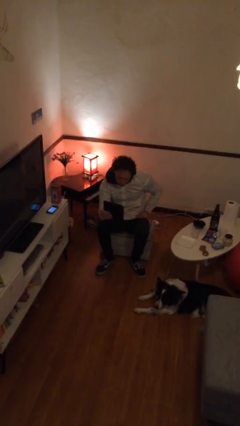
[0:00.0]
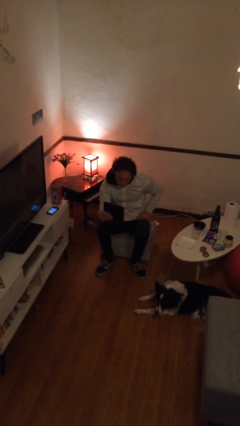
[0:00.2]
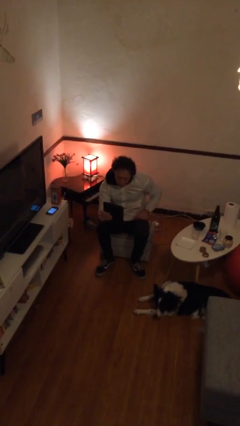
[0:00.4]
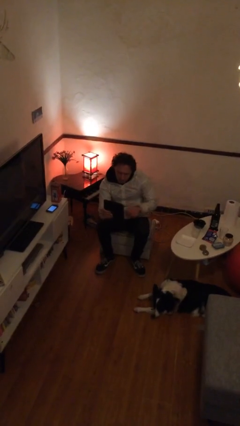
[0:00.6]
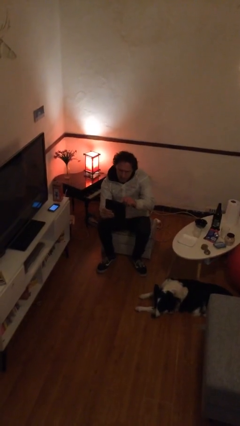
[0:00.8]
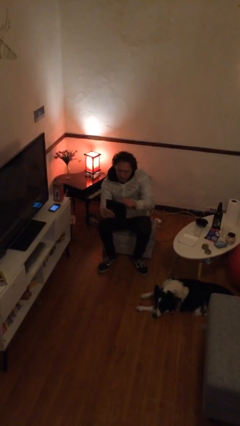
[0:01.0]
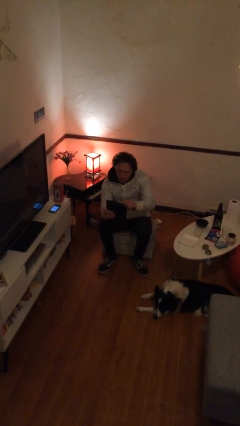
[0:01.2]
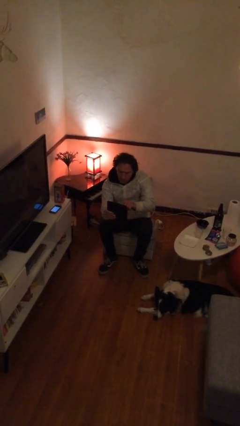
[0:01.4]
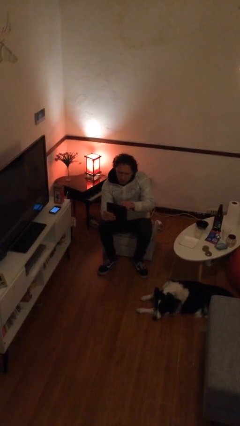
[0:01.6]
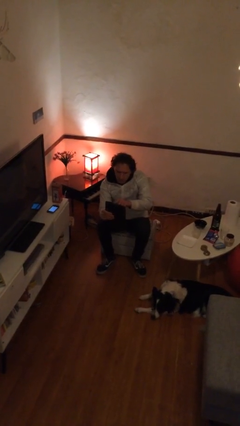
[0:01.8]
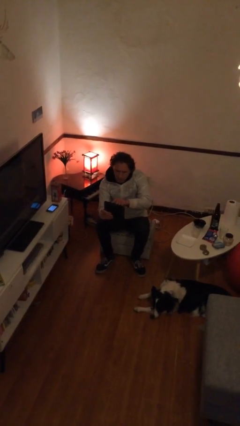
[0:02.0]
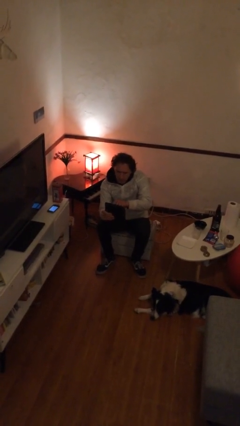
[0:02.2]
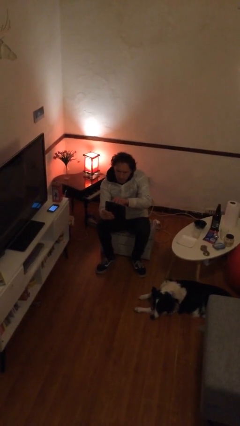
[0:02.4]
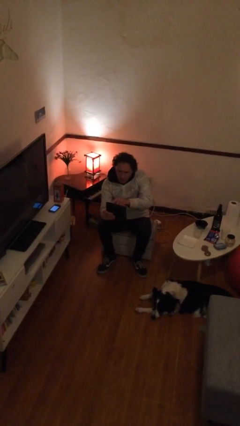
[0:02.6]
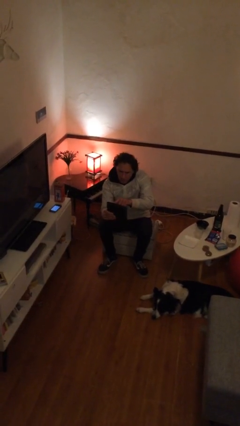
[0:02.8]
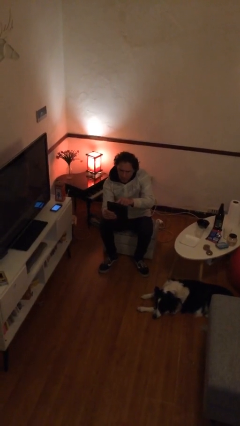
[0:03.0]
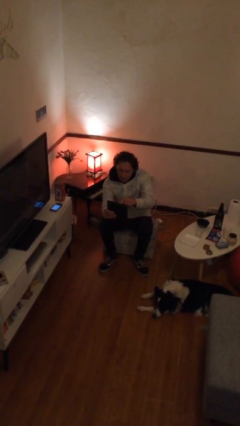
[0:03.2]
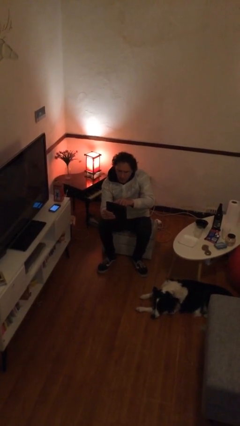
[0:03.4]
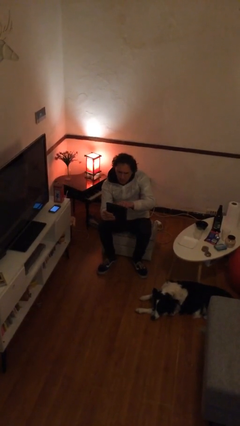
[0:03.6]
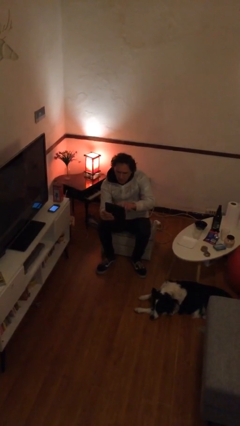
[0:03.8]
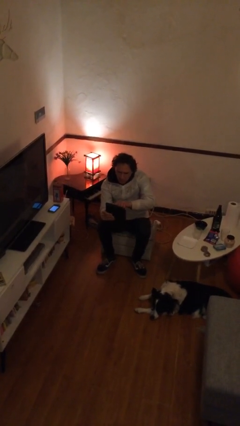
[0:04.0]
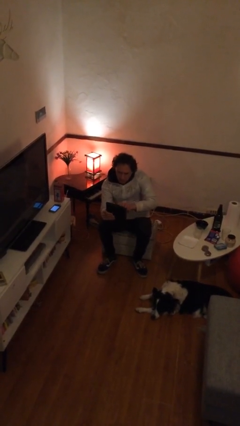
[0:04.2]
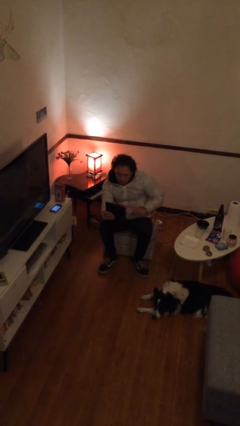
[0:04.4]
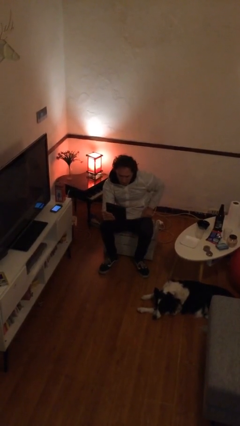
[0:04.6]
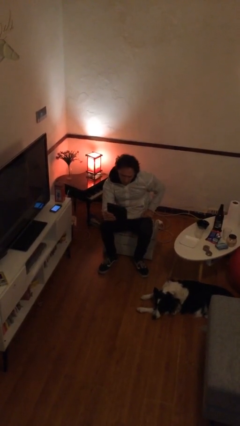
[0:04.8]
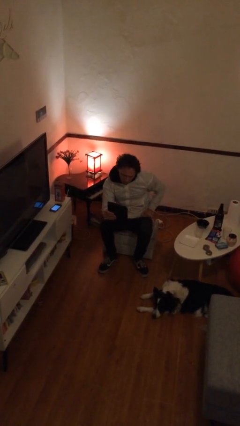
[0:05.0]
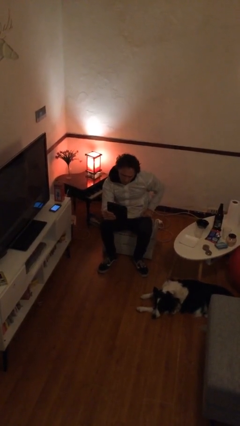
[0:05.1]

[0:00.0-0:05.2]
person interacts with tablet

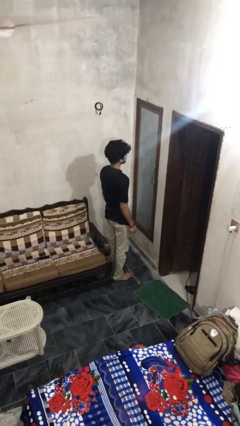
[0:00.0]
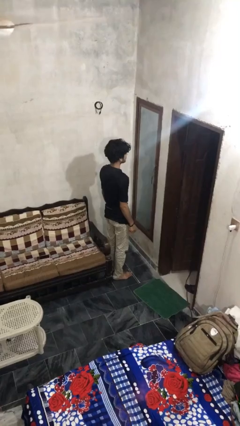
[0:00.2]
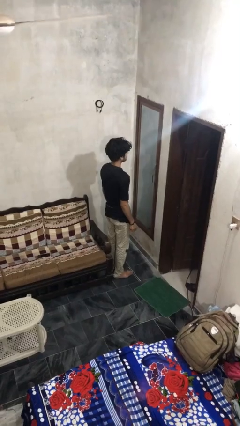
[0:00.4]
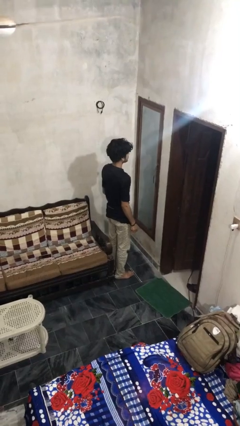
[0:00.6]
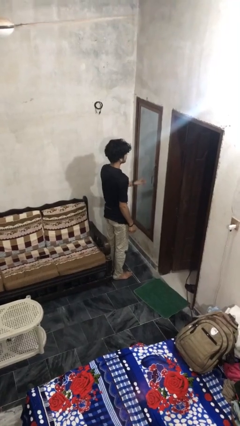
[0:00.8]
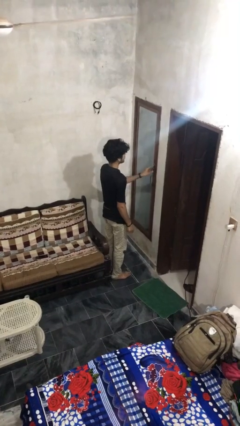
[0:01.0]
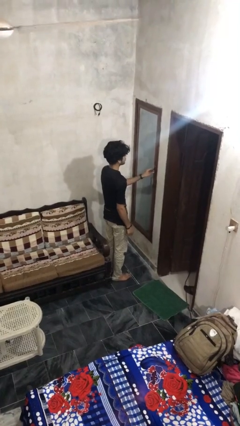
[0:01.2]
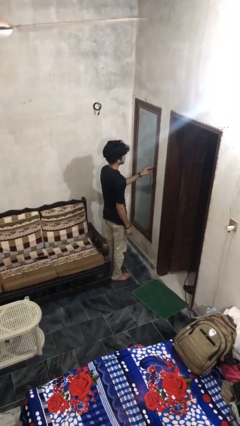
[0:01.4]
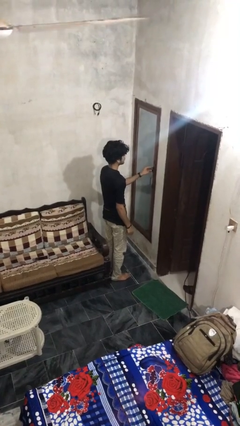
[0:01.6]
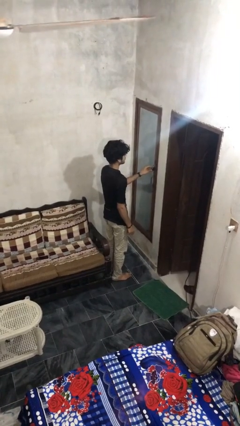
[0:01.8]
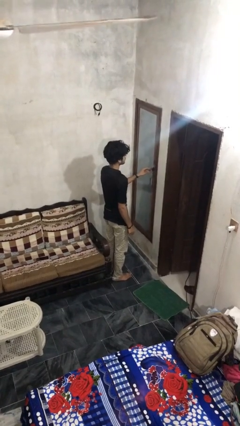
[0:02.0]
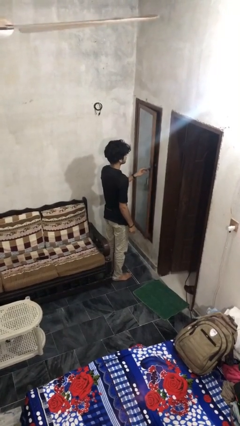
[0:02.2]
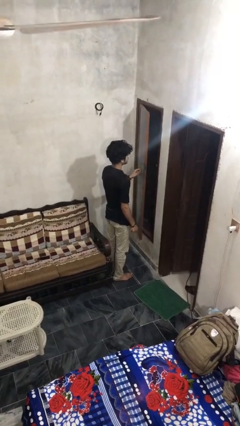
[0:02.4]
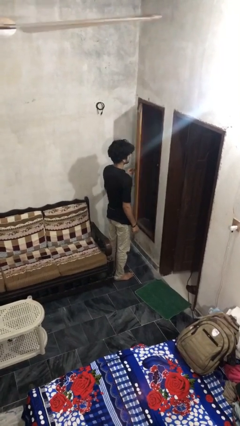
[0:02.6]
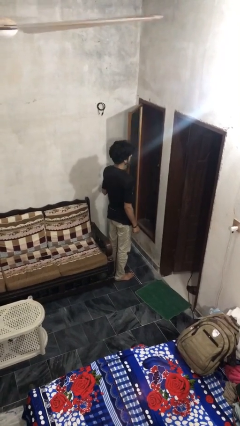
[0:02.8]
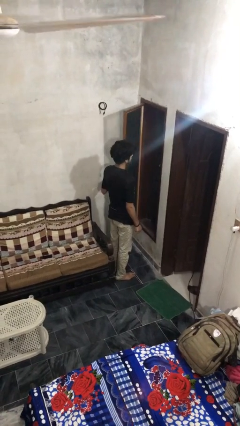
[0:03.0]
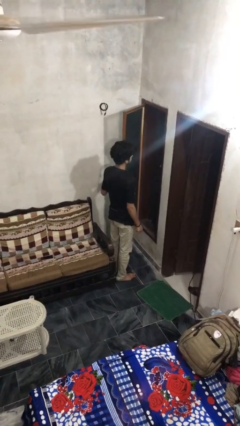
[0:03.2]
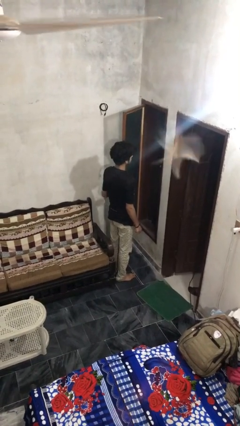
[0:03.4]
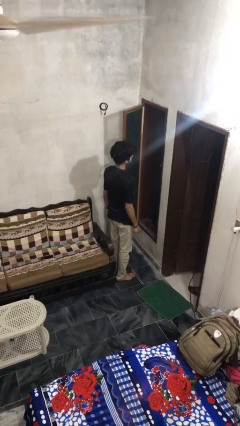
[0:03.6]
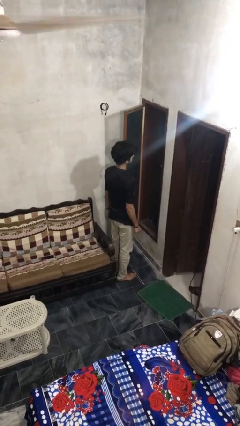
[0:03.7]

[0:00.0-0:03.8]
person opens home window

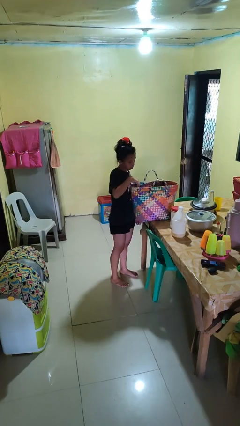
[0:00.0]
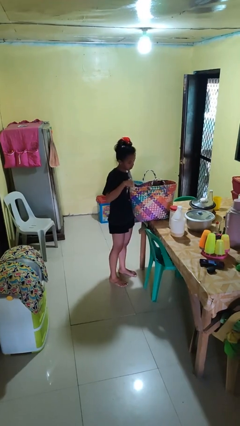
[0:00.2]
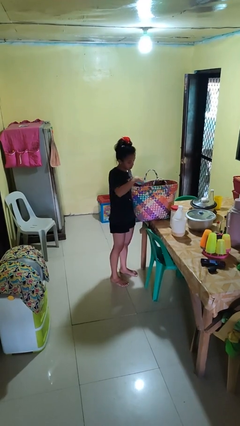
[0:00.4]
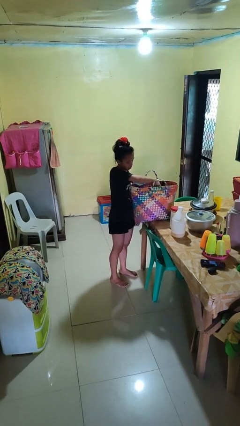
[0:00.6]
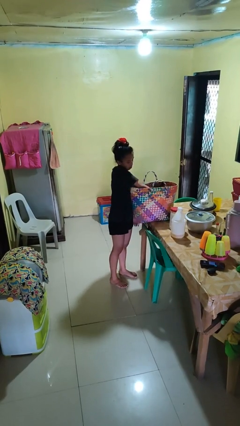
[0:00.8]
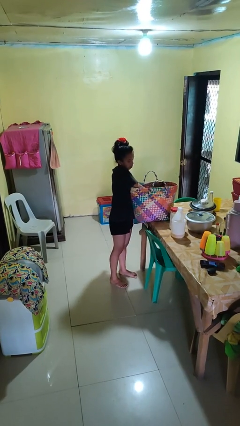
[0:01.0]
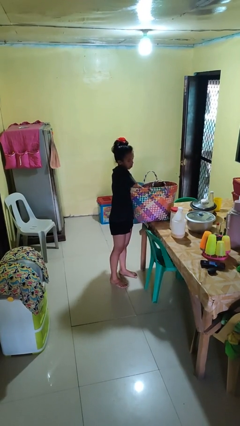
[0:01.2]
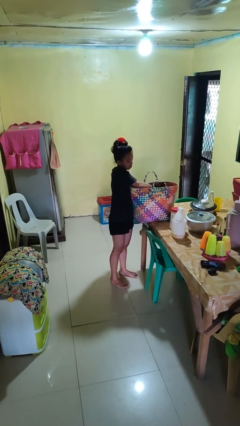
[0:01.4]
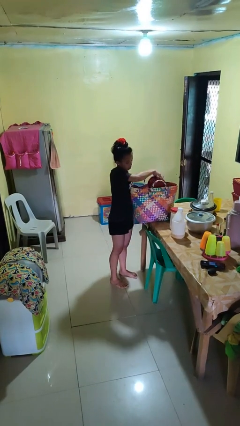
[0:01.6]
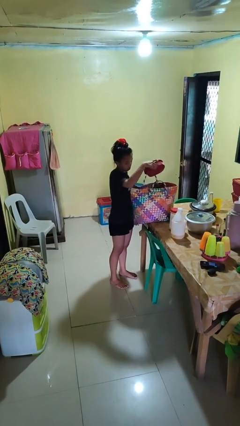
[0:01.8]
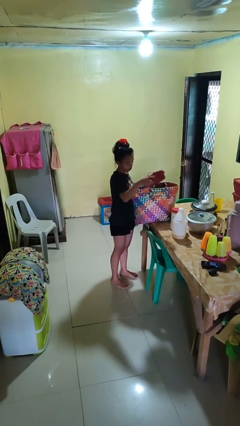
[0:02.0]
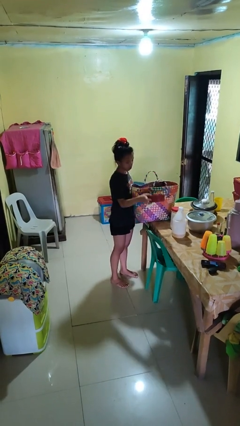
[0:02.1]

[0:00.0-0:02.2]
person takes object from basket

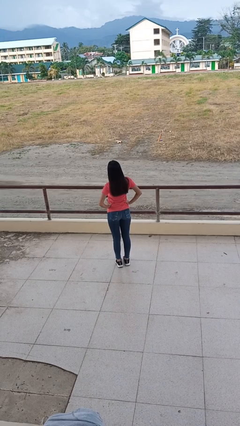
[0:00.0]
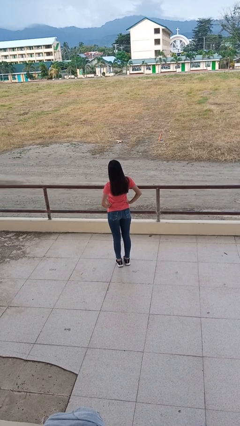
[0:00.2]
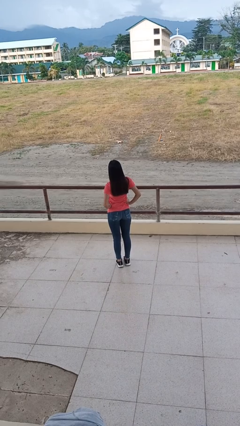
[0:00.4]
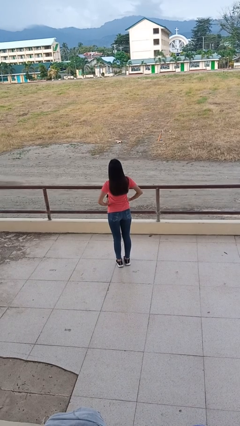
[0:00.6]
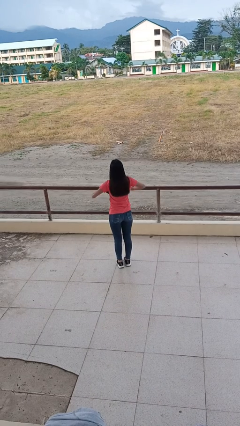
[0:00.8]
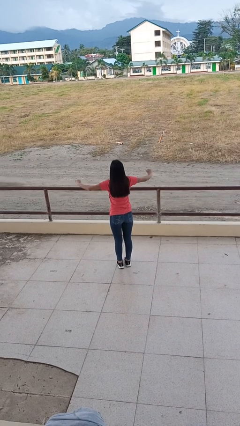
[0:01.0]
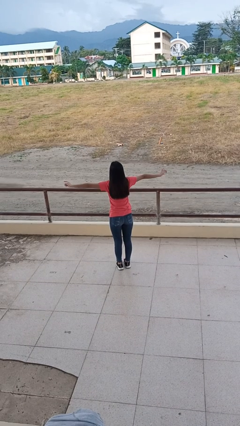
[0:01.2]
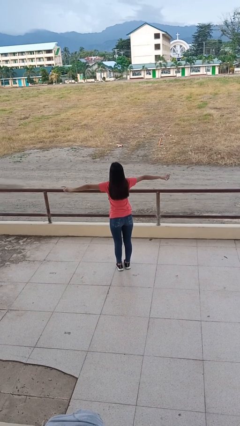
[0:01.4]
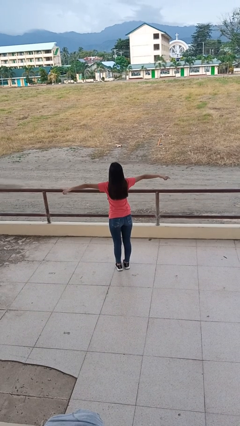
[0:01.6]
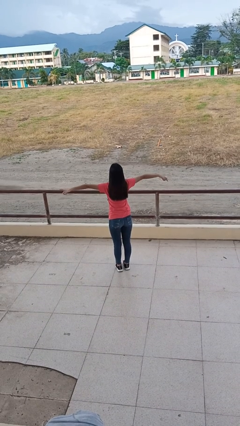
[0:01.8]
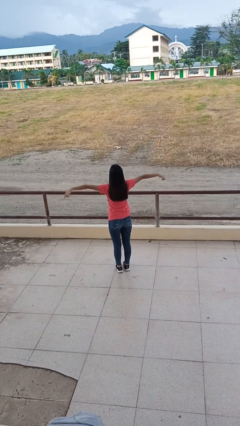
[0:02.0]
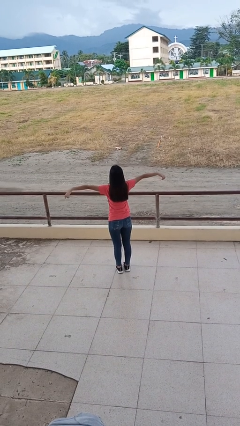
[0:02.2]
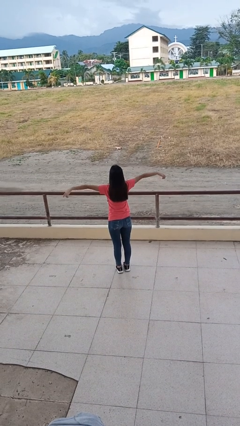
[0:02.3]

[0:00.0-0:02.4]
person stretches arms to side

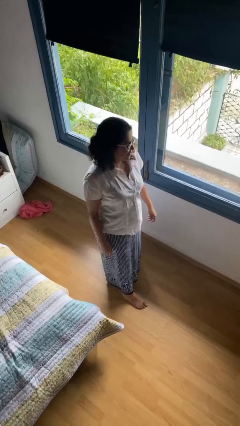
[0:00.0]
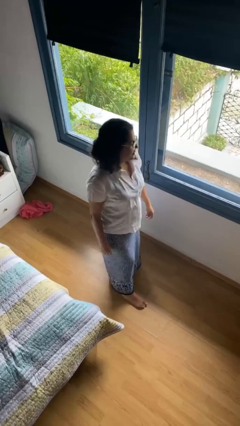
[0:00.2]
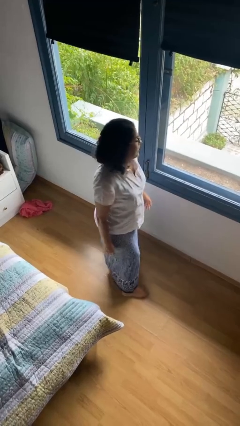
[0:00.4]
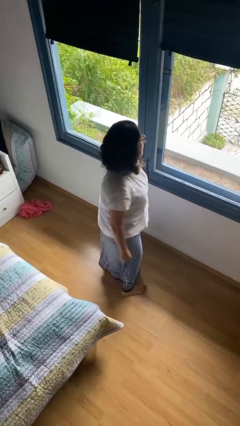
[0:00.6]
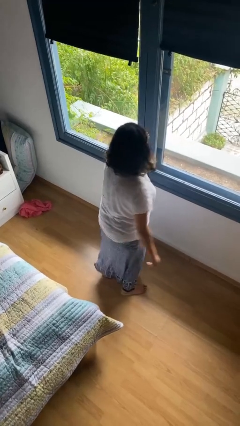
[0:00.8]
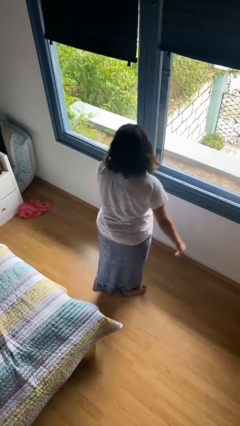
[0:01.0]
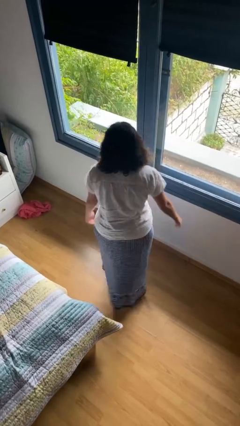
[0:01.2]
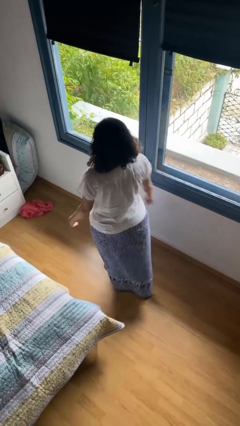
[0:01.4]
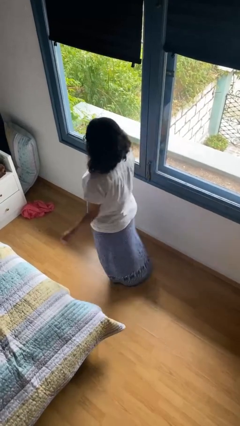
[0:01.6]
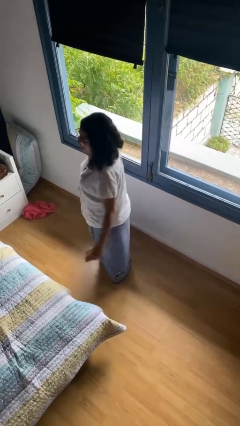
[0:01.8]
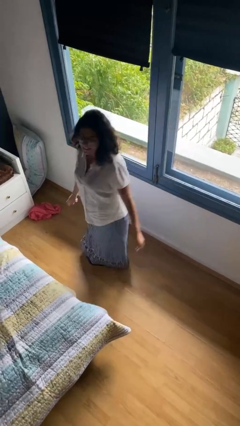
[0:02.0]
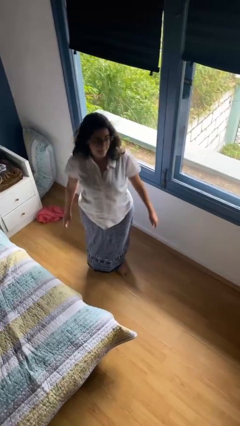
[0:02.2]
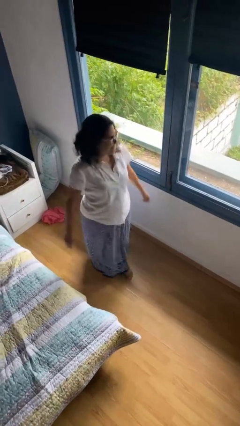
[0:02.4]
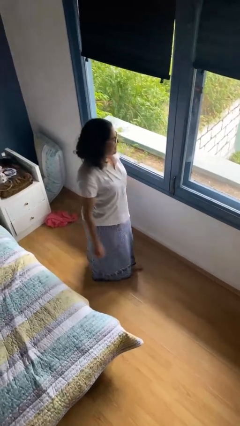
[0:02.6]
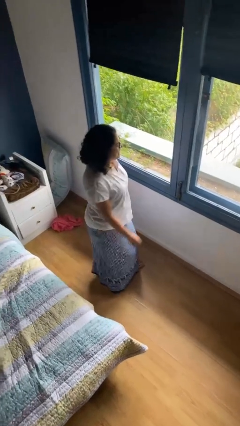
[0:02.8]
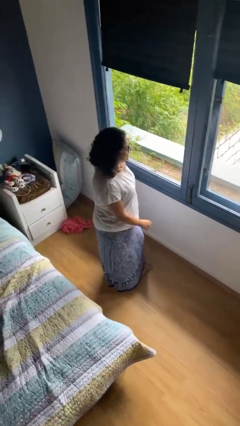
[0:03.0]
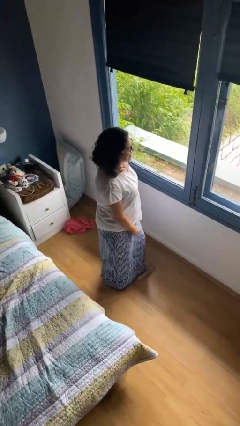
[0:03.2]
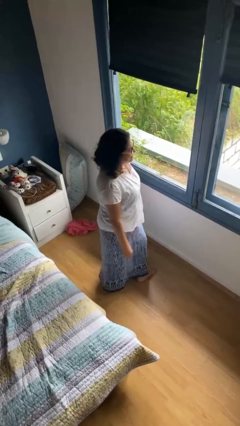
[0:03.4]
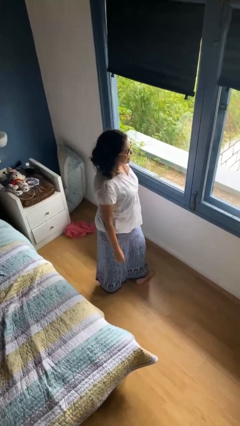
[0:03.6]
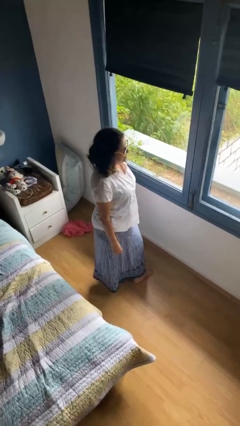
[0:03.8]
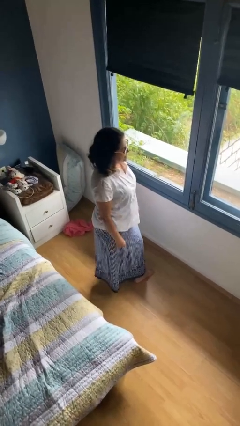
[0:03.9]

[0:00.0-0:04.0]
person twirls

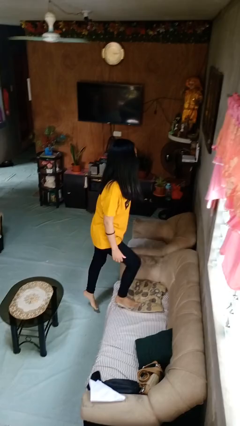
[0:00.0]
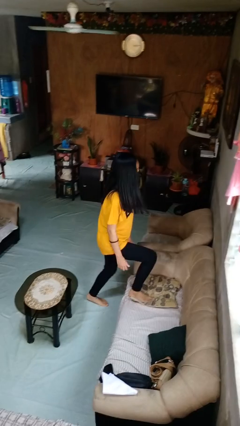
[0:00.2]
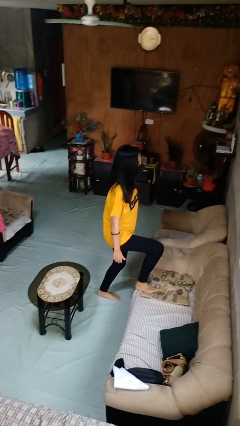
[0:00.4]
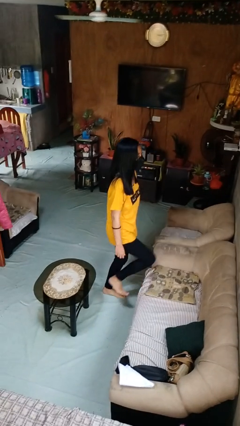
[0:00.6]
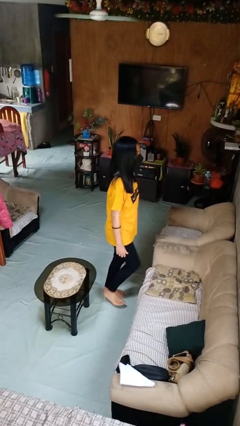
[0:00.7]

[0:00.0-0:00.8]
person climbs off couch
